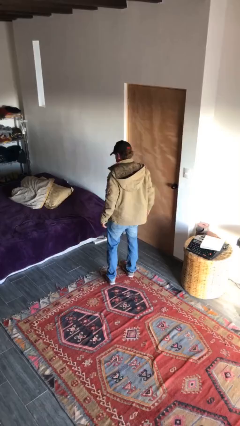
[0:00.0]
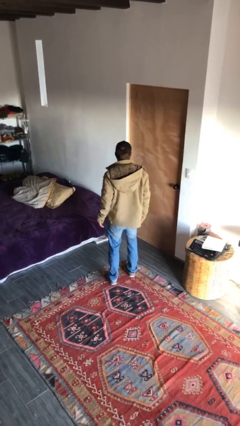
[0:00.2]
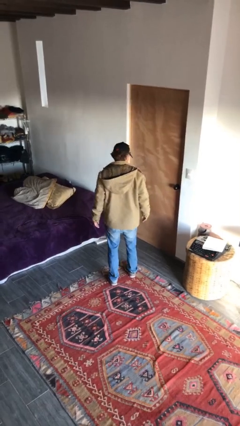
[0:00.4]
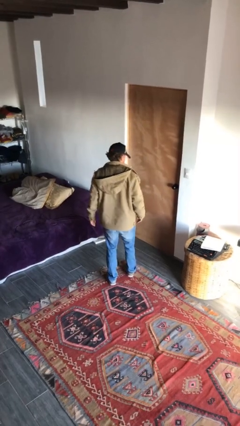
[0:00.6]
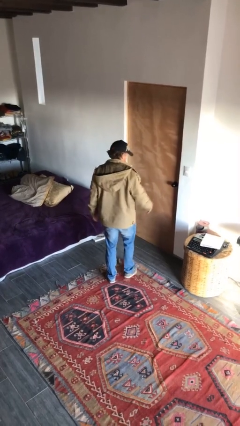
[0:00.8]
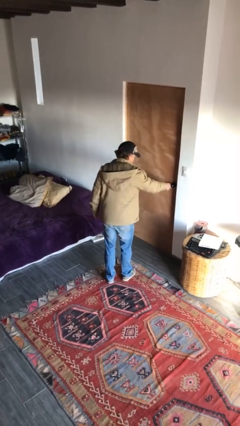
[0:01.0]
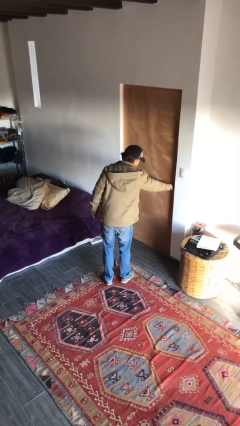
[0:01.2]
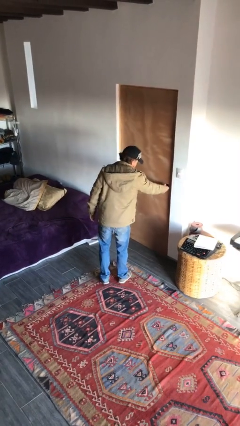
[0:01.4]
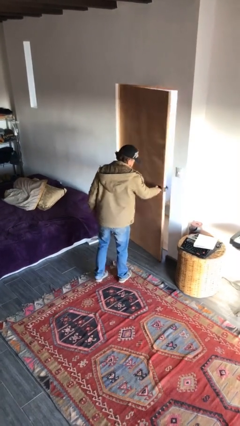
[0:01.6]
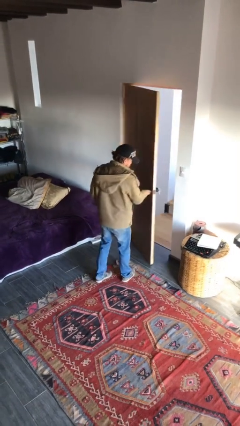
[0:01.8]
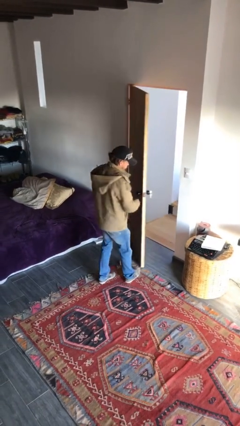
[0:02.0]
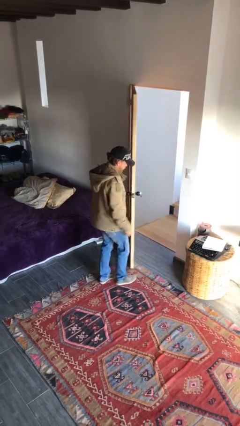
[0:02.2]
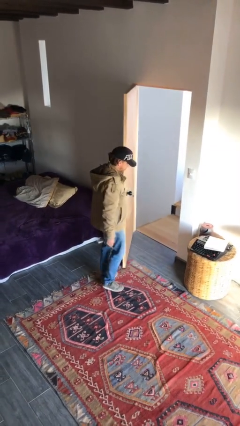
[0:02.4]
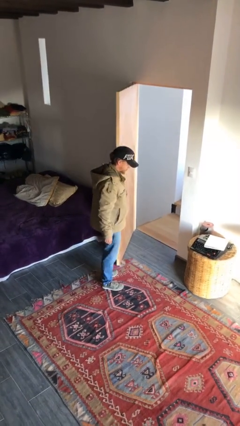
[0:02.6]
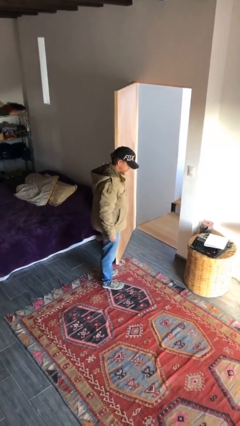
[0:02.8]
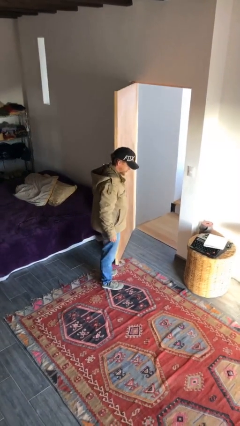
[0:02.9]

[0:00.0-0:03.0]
person opens facility door

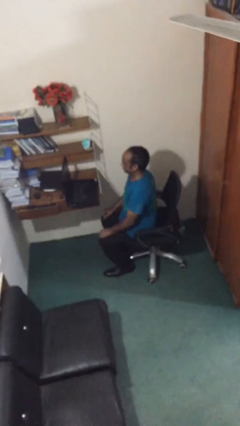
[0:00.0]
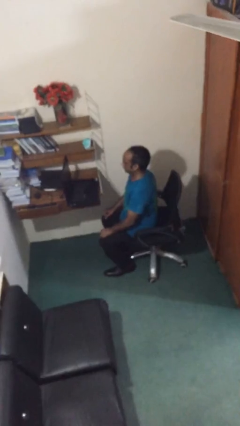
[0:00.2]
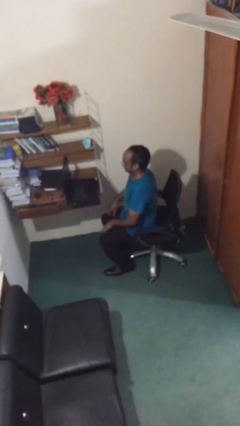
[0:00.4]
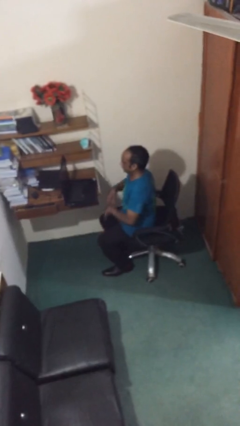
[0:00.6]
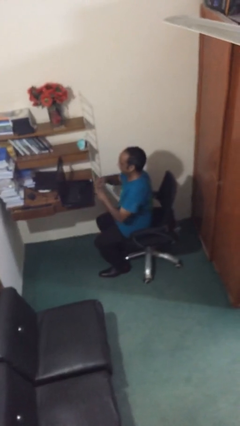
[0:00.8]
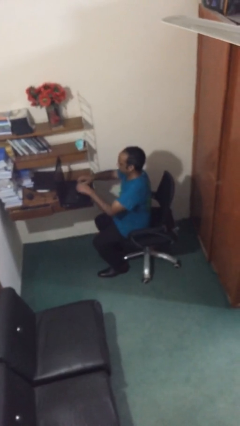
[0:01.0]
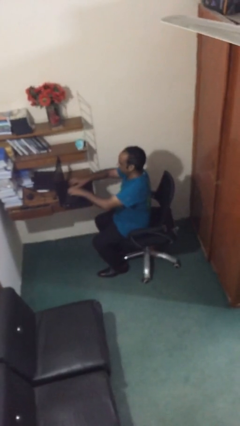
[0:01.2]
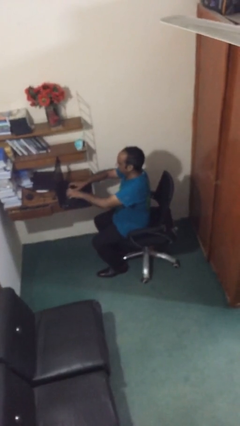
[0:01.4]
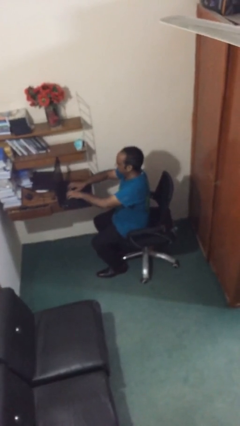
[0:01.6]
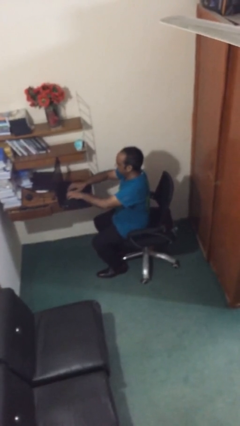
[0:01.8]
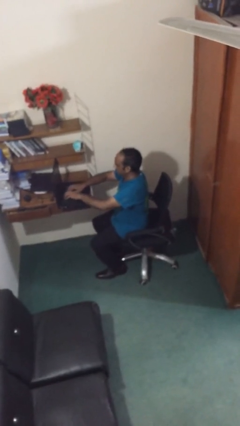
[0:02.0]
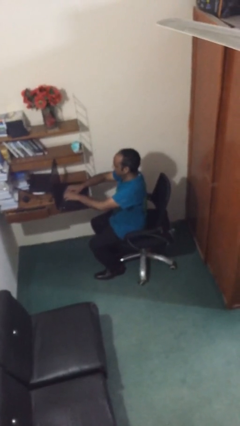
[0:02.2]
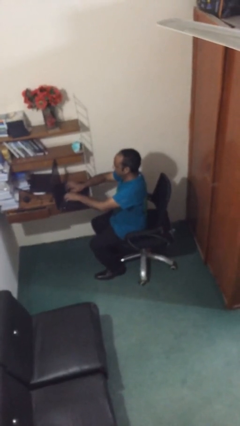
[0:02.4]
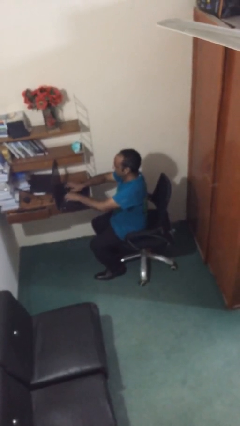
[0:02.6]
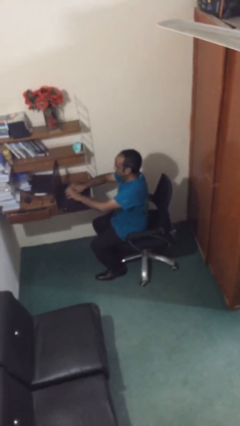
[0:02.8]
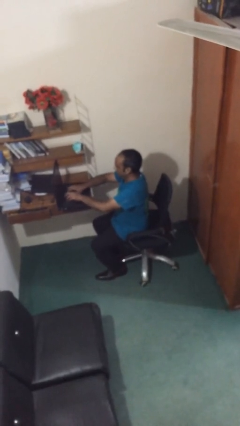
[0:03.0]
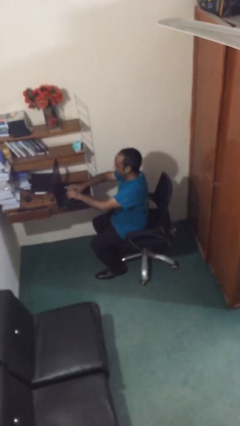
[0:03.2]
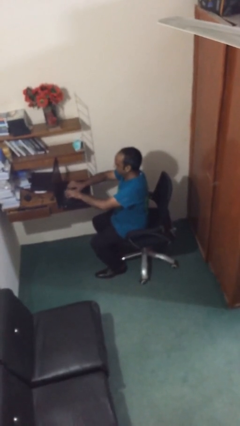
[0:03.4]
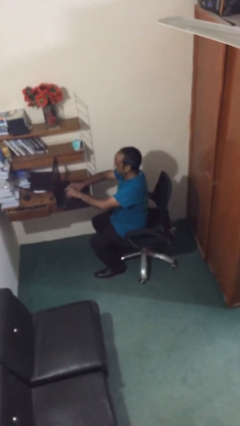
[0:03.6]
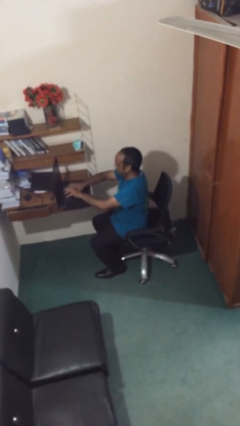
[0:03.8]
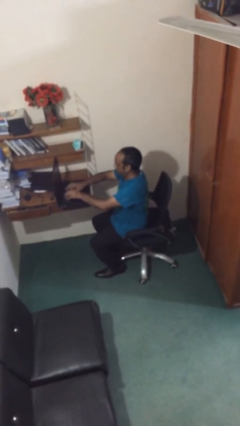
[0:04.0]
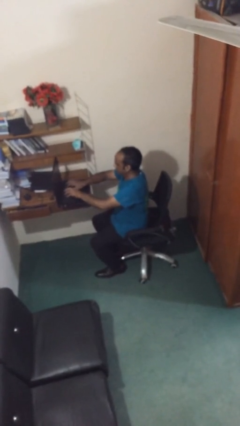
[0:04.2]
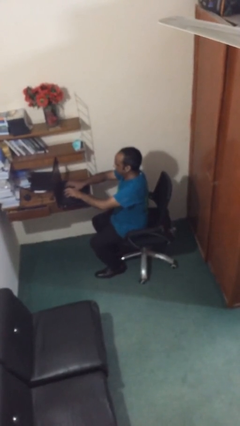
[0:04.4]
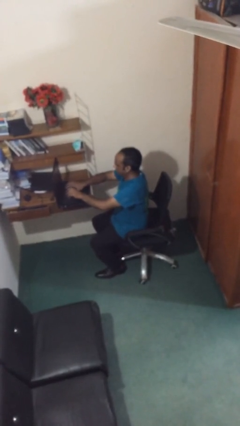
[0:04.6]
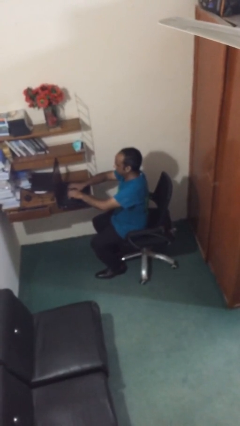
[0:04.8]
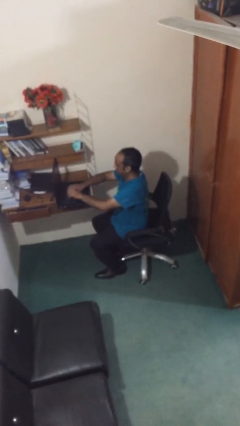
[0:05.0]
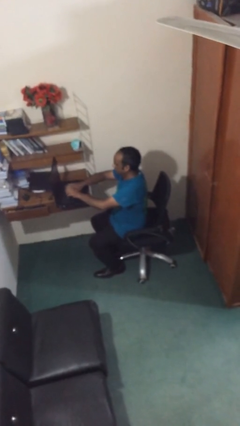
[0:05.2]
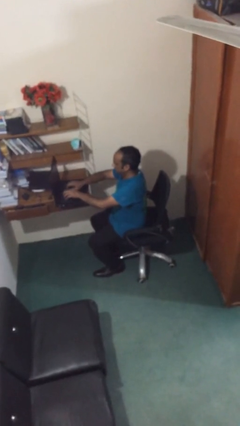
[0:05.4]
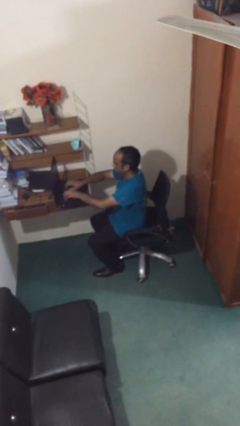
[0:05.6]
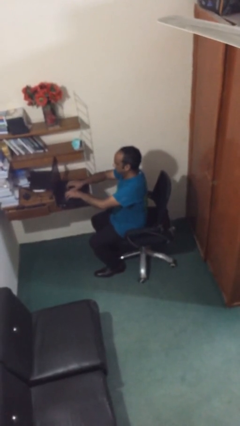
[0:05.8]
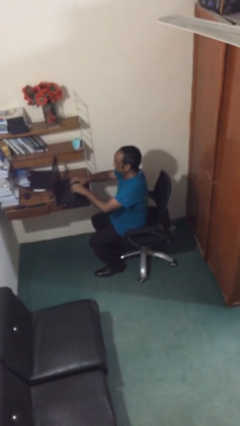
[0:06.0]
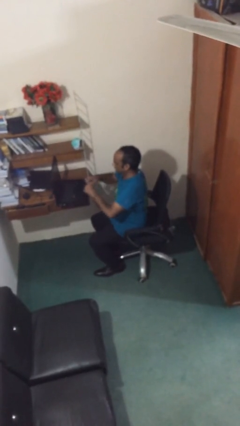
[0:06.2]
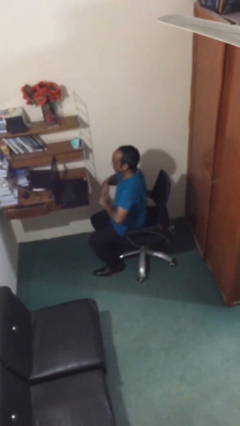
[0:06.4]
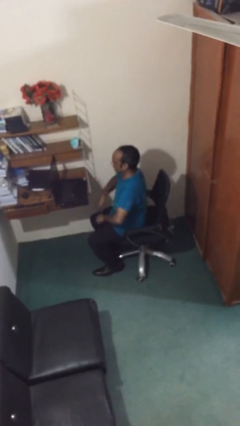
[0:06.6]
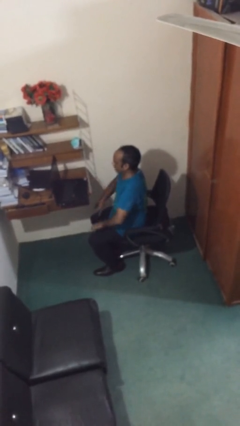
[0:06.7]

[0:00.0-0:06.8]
person interacts with laptop

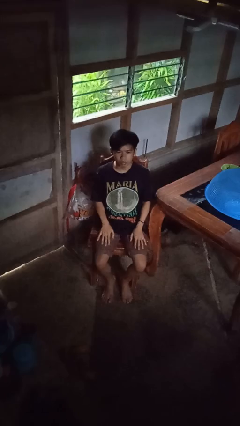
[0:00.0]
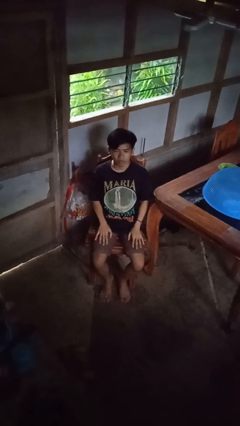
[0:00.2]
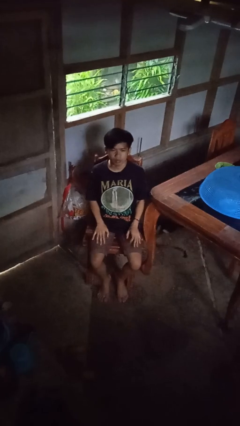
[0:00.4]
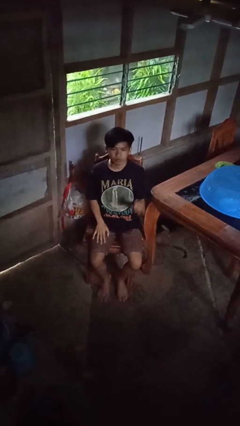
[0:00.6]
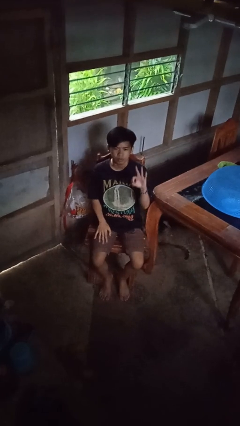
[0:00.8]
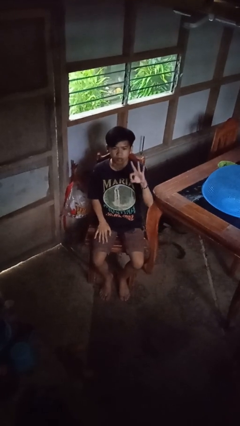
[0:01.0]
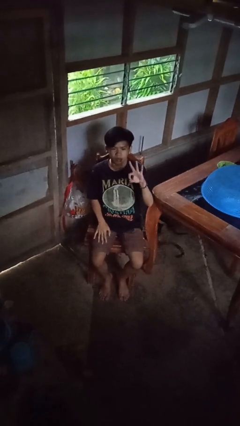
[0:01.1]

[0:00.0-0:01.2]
person gestures number three

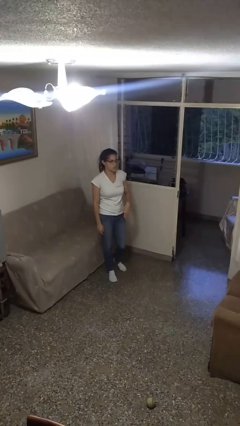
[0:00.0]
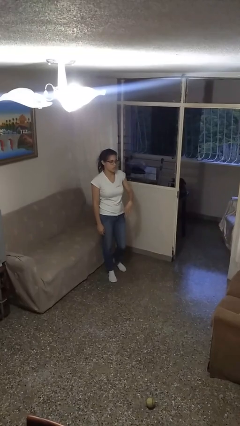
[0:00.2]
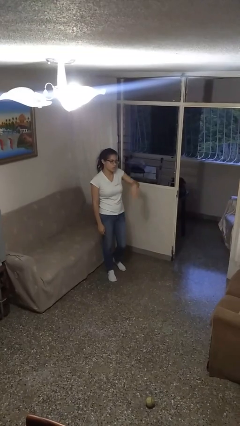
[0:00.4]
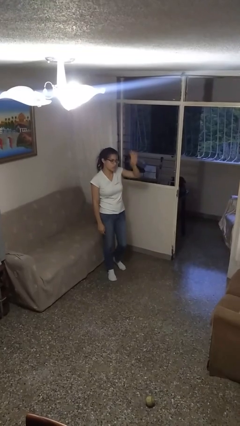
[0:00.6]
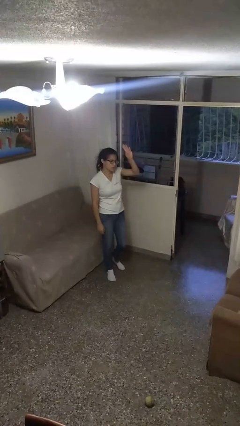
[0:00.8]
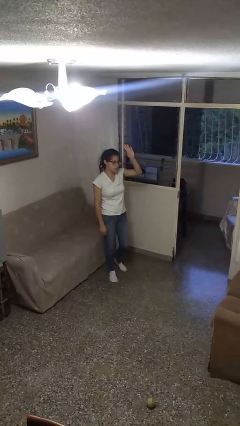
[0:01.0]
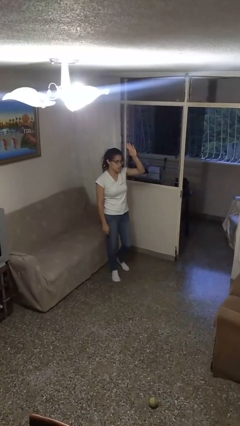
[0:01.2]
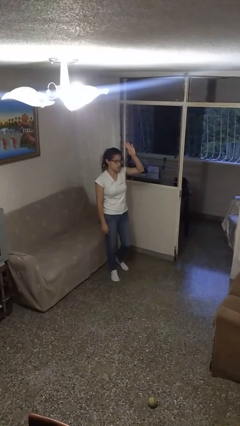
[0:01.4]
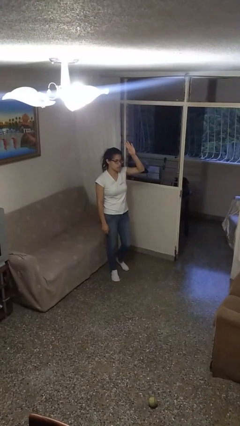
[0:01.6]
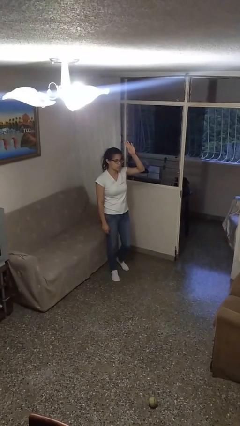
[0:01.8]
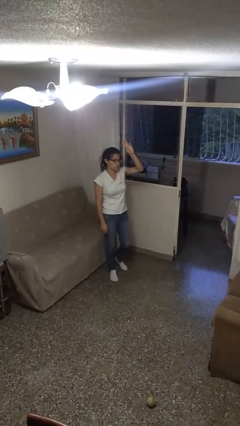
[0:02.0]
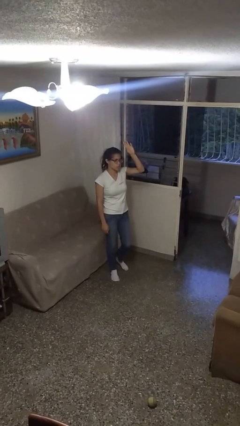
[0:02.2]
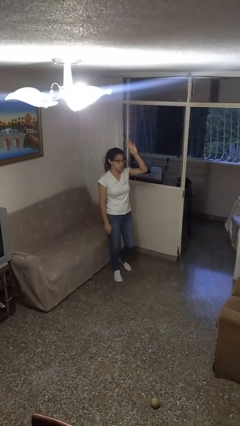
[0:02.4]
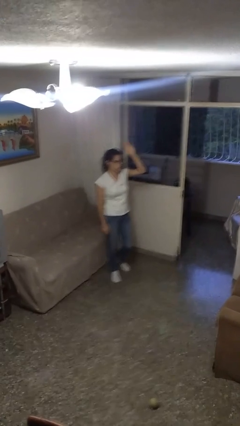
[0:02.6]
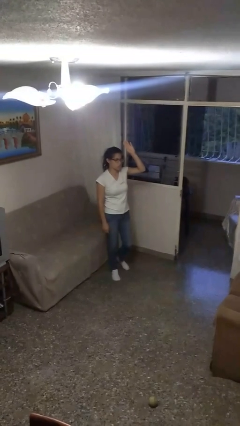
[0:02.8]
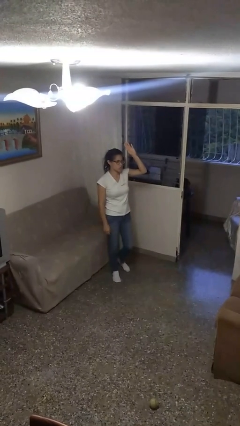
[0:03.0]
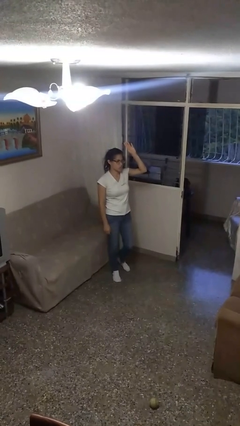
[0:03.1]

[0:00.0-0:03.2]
person gestures swipe up

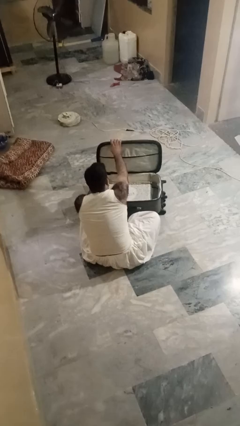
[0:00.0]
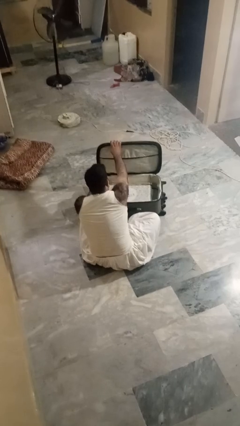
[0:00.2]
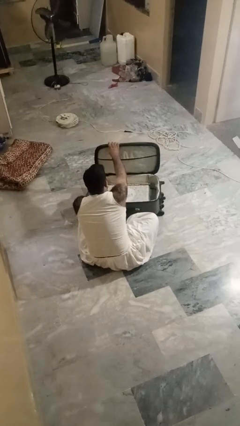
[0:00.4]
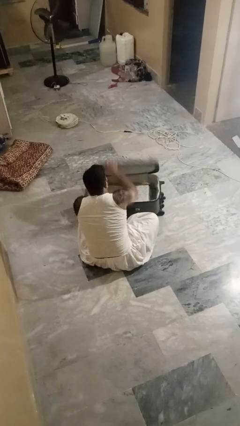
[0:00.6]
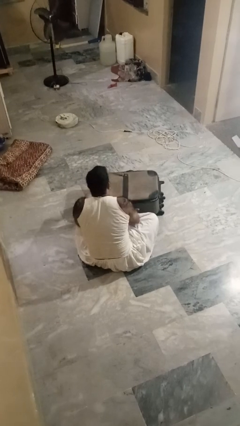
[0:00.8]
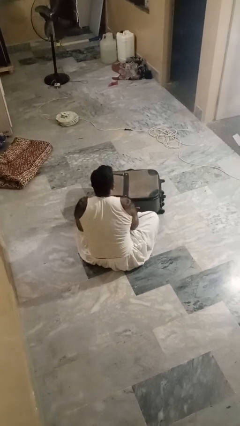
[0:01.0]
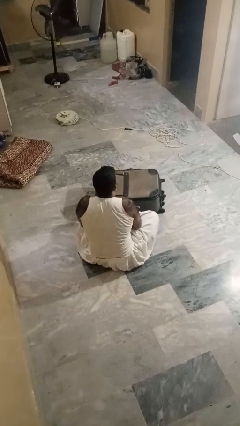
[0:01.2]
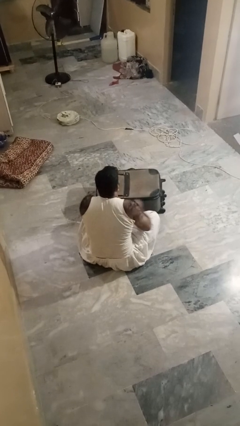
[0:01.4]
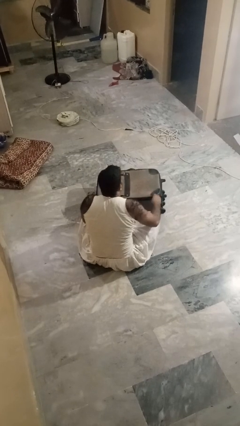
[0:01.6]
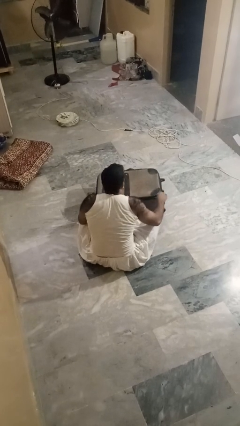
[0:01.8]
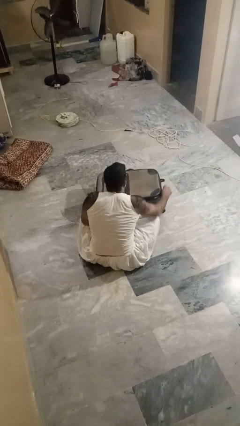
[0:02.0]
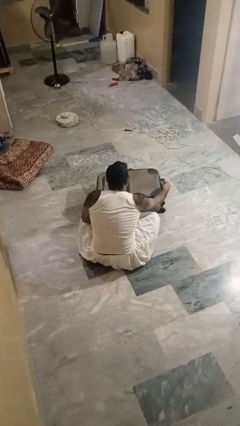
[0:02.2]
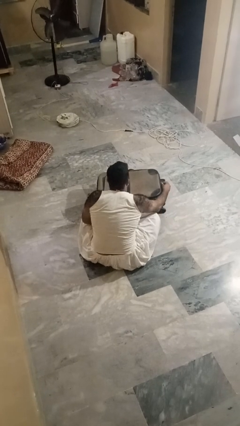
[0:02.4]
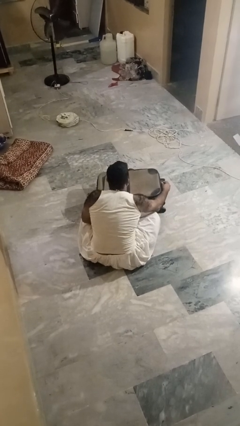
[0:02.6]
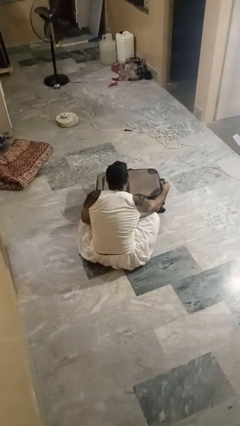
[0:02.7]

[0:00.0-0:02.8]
person closes suitcase

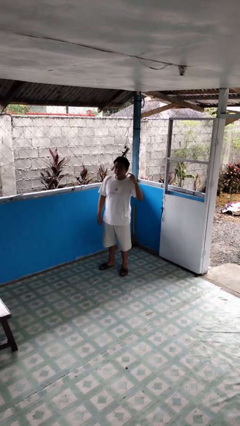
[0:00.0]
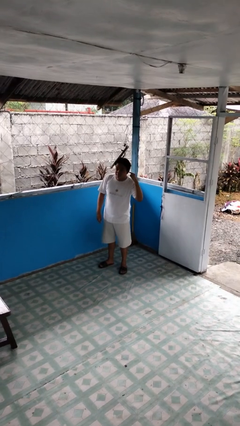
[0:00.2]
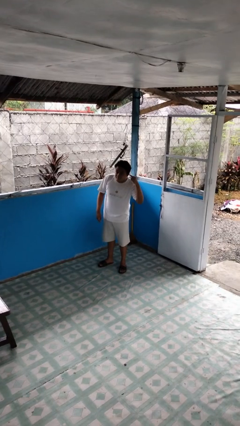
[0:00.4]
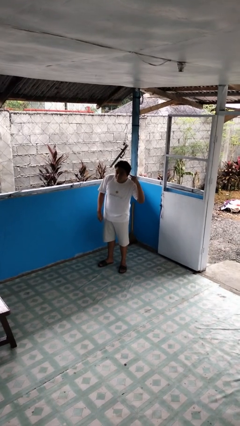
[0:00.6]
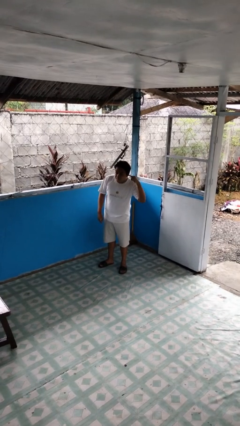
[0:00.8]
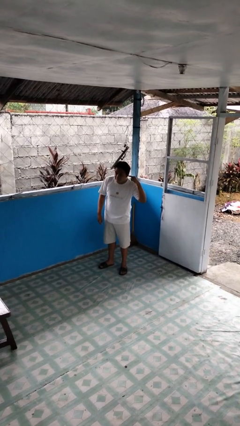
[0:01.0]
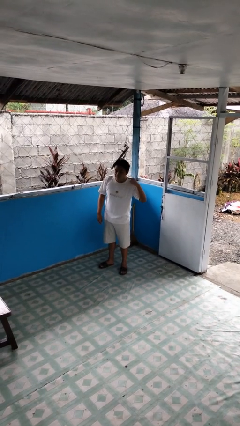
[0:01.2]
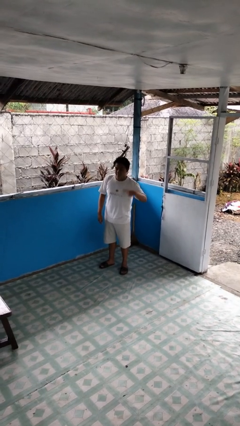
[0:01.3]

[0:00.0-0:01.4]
person gestures listen closely
